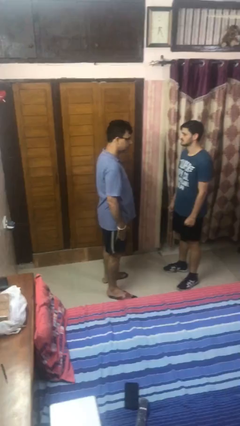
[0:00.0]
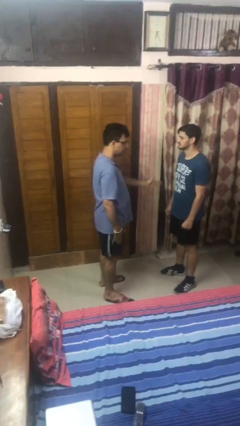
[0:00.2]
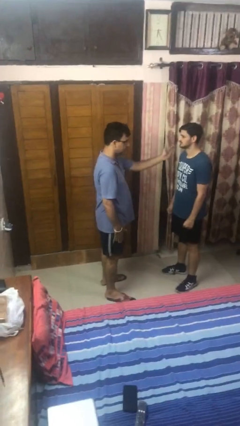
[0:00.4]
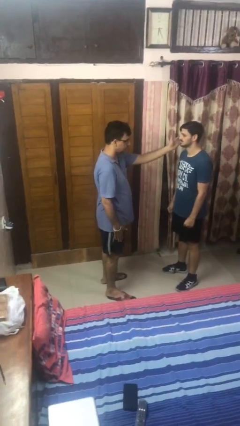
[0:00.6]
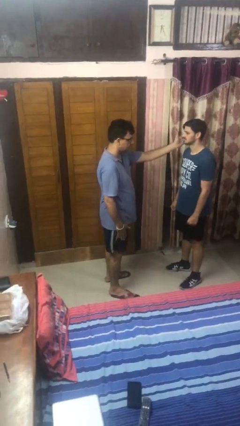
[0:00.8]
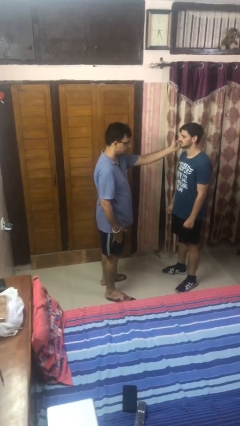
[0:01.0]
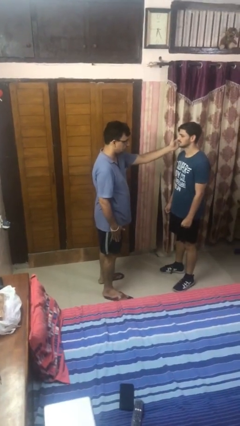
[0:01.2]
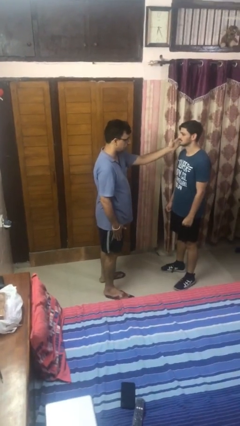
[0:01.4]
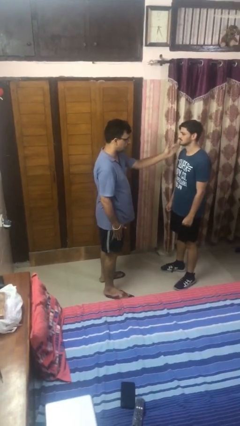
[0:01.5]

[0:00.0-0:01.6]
person touches face of person

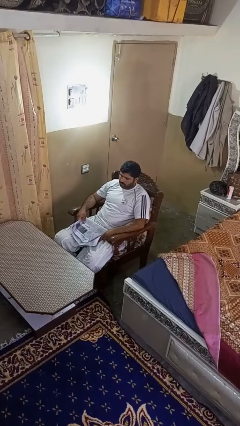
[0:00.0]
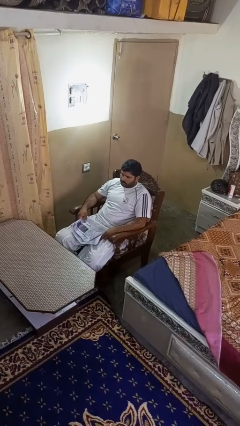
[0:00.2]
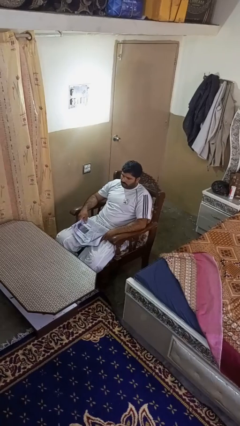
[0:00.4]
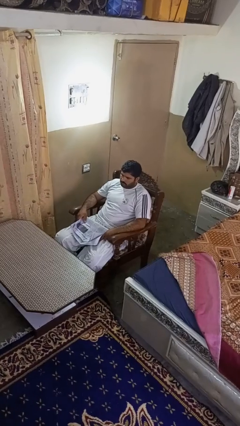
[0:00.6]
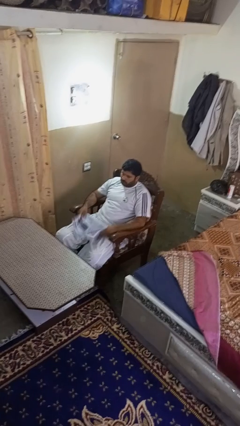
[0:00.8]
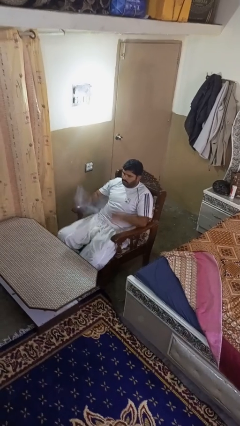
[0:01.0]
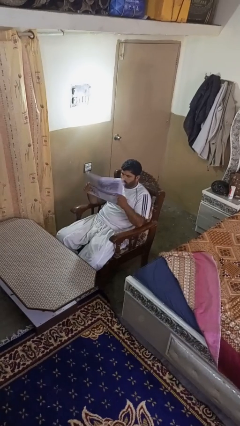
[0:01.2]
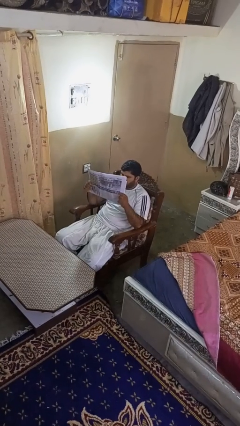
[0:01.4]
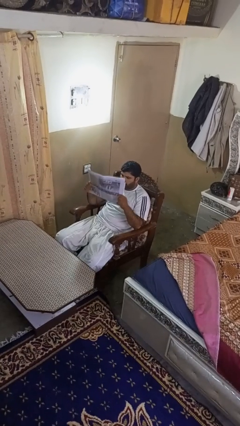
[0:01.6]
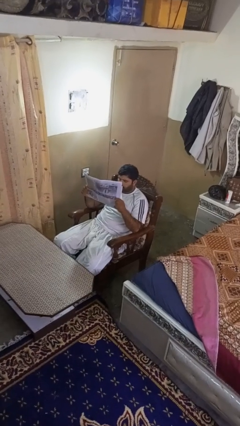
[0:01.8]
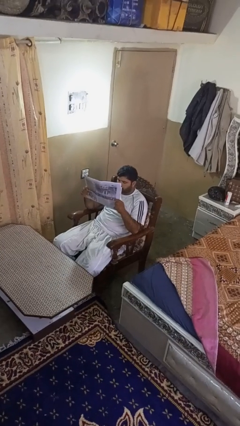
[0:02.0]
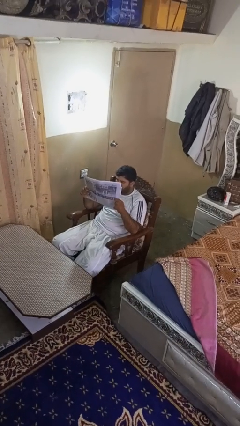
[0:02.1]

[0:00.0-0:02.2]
person reads newspaper

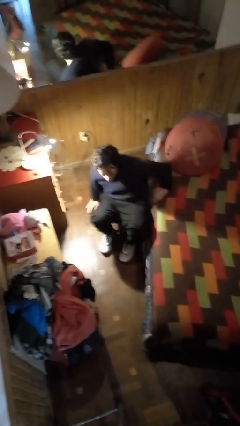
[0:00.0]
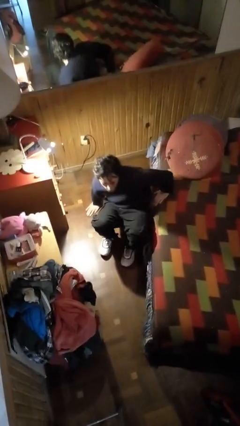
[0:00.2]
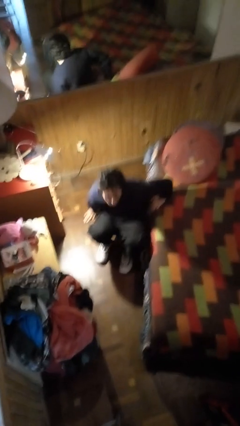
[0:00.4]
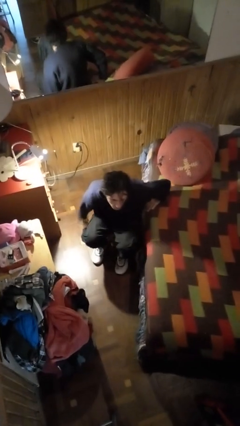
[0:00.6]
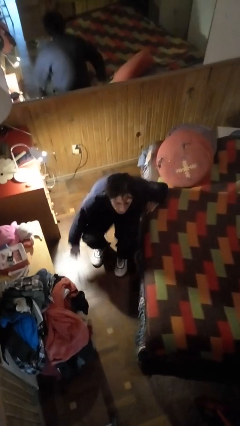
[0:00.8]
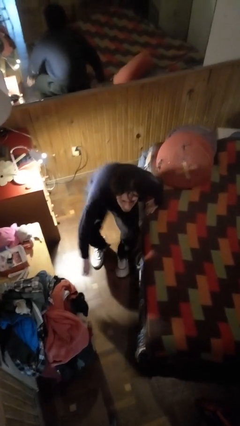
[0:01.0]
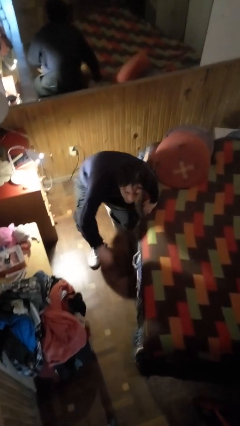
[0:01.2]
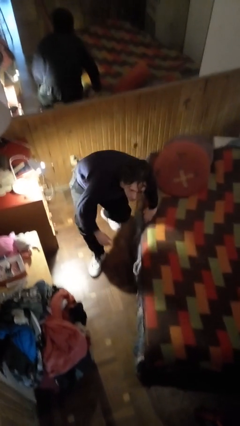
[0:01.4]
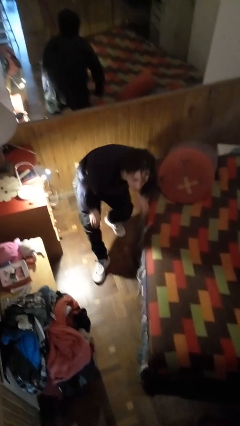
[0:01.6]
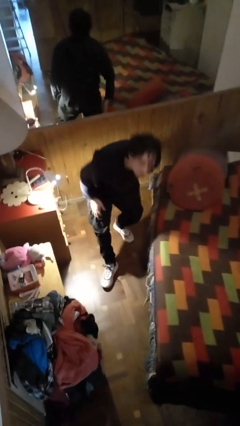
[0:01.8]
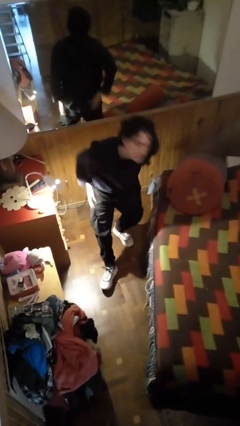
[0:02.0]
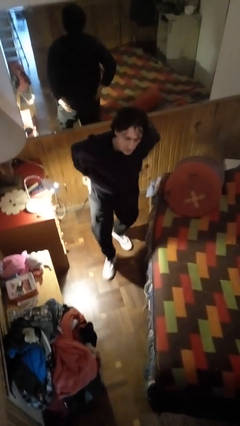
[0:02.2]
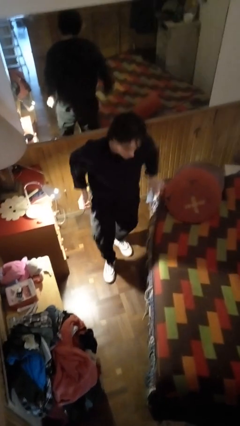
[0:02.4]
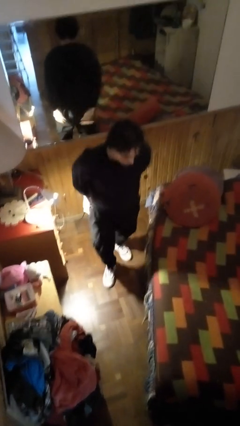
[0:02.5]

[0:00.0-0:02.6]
person stands up from floor

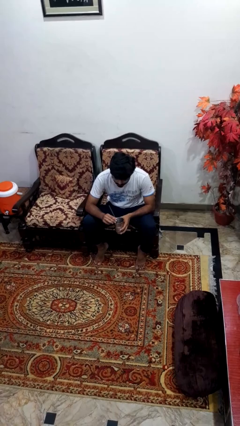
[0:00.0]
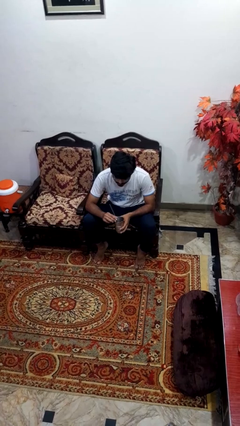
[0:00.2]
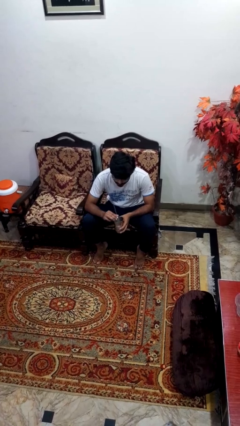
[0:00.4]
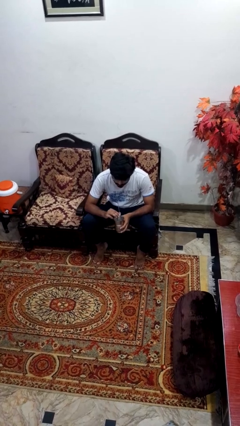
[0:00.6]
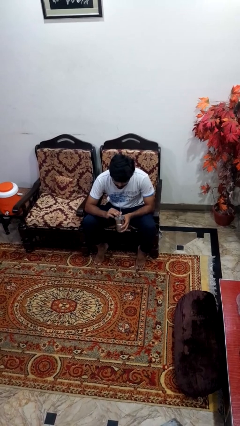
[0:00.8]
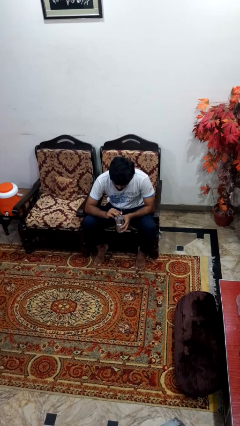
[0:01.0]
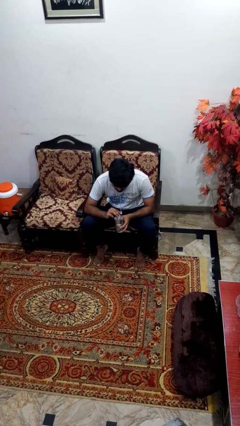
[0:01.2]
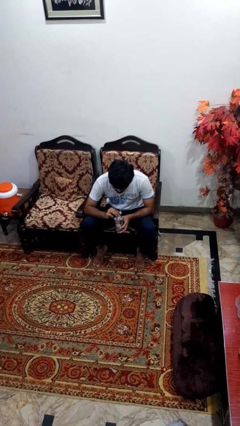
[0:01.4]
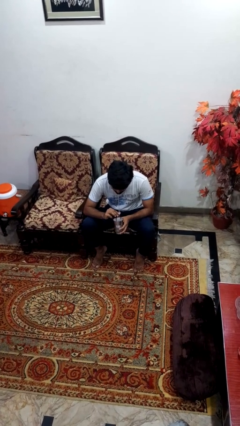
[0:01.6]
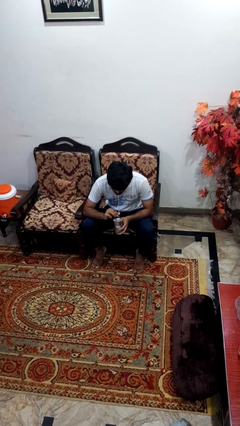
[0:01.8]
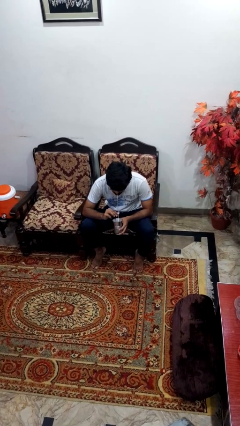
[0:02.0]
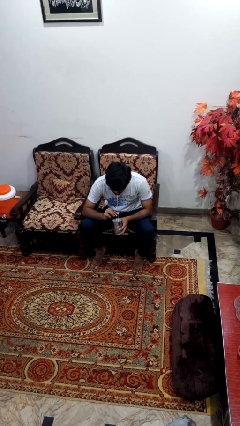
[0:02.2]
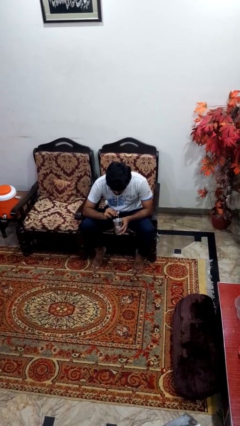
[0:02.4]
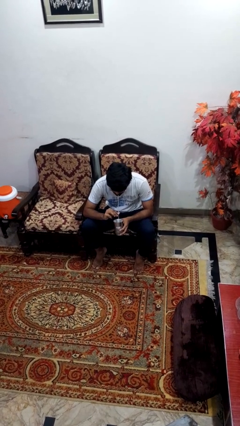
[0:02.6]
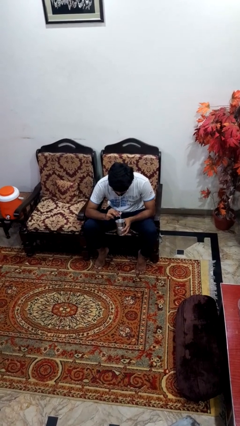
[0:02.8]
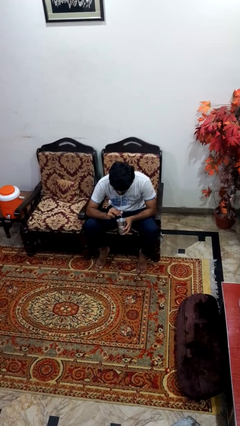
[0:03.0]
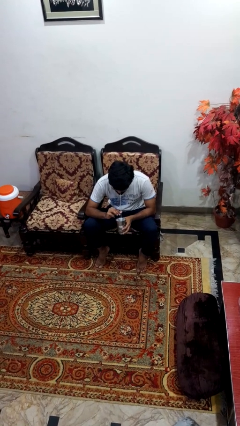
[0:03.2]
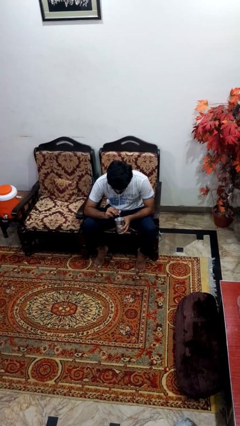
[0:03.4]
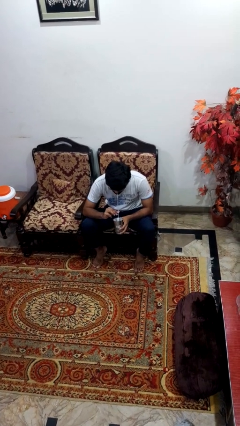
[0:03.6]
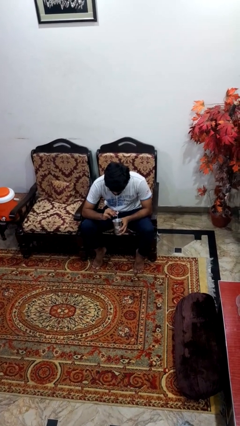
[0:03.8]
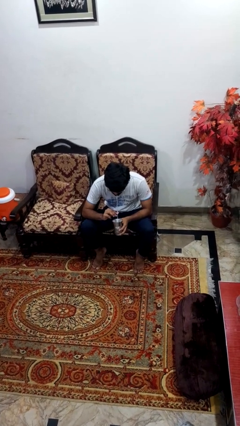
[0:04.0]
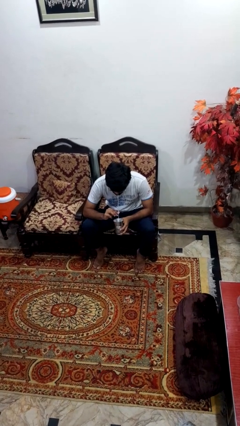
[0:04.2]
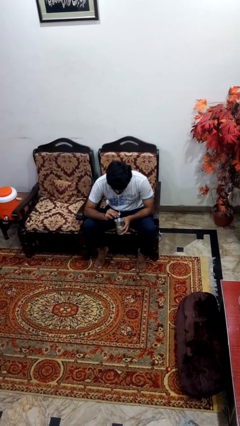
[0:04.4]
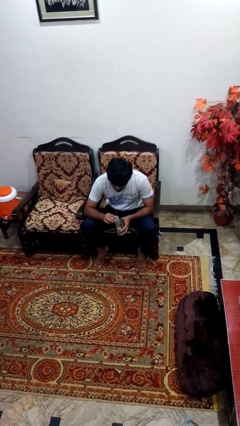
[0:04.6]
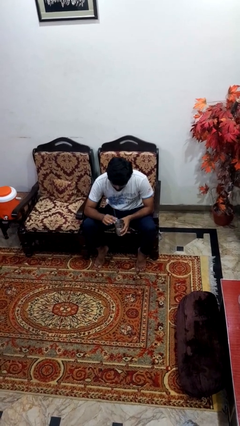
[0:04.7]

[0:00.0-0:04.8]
person drinks from straw

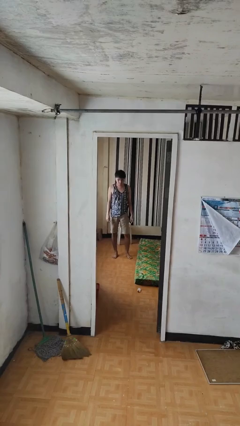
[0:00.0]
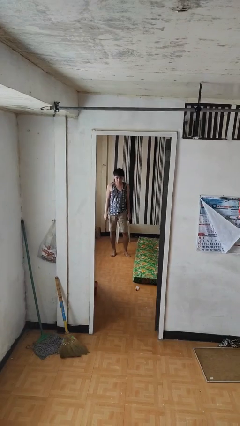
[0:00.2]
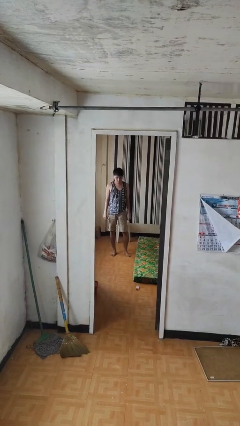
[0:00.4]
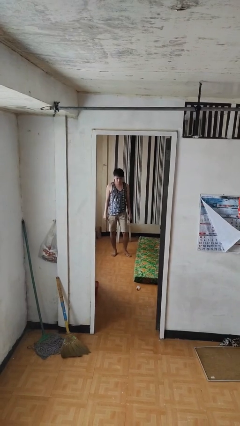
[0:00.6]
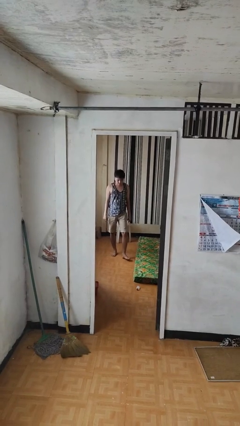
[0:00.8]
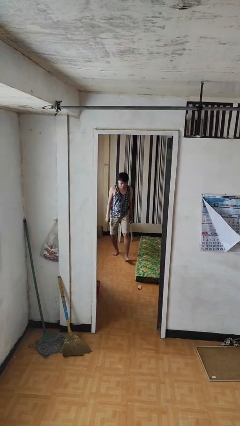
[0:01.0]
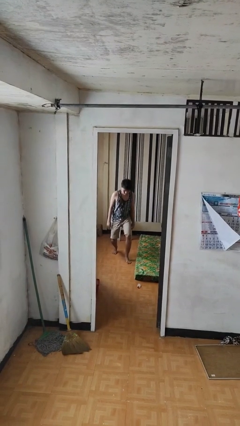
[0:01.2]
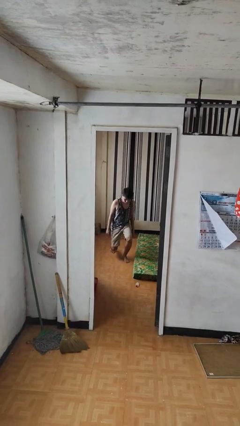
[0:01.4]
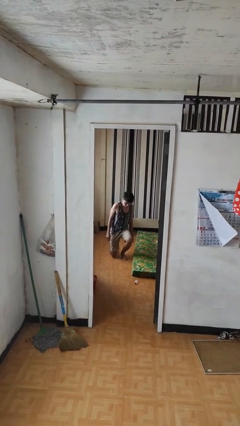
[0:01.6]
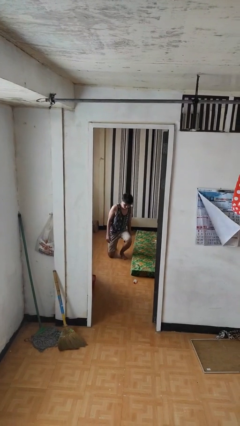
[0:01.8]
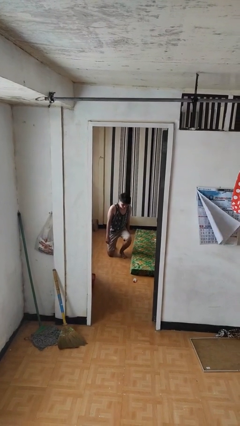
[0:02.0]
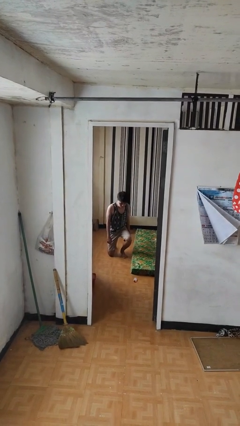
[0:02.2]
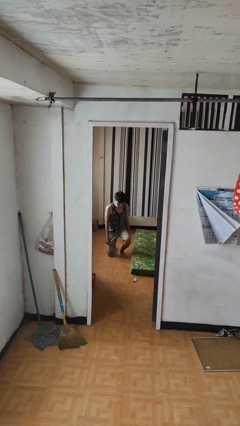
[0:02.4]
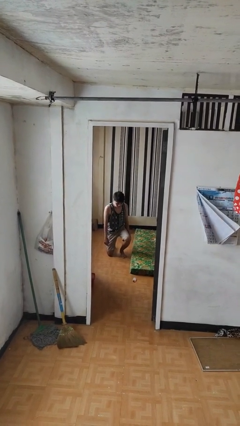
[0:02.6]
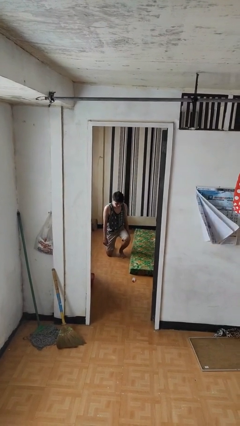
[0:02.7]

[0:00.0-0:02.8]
person kneels

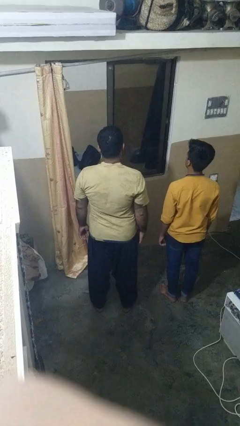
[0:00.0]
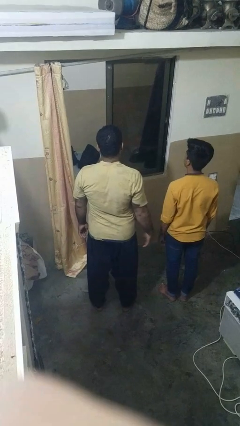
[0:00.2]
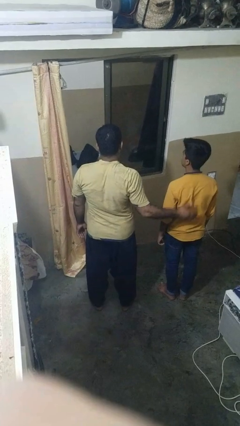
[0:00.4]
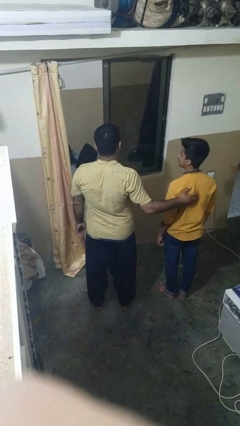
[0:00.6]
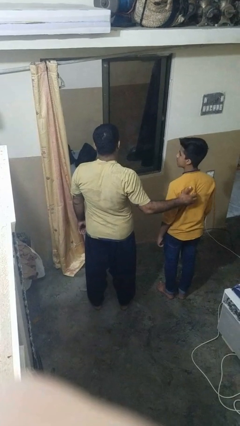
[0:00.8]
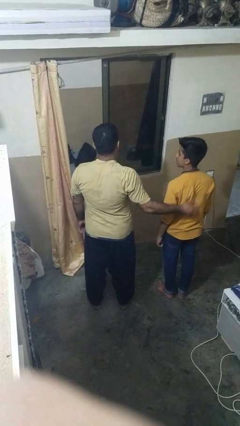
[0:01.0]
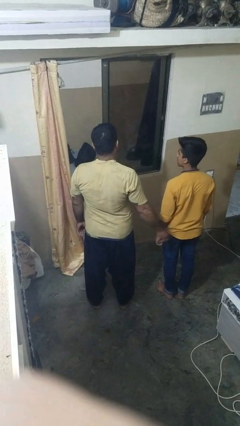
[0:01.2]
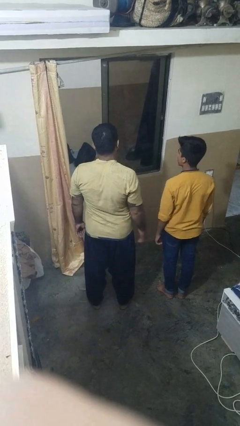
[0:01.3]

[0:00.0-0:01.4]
person touches back of person

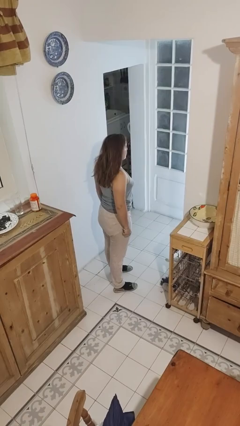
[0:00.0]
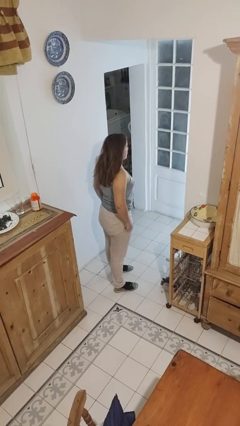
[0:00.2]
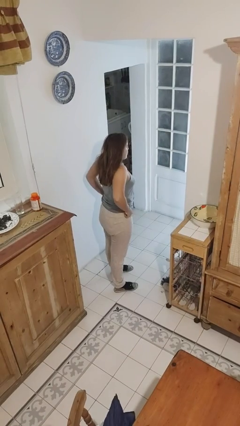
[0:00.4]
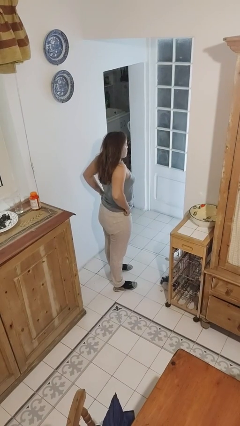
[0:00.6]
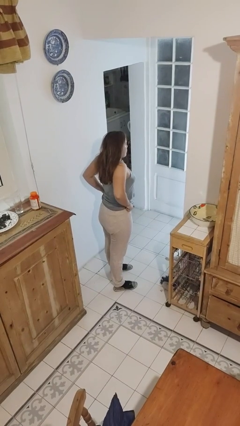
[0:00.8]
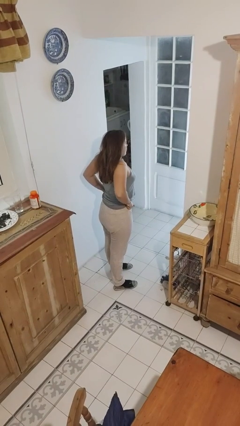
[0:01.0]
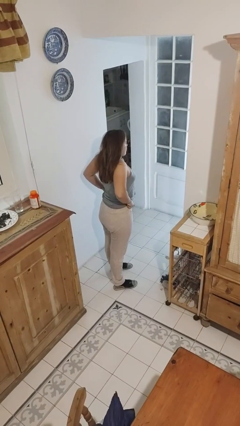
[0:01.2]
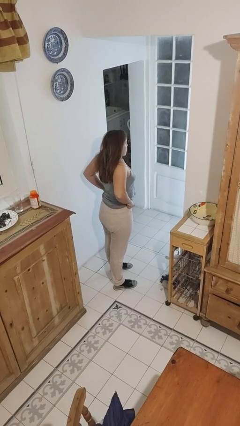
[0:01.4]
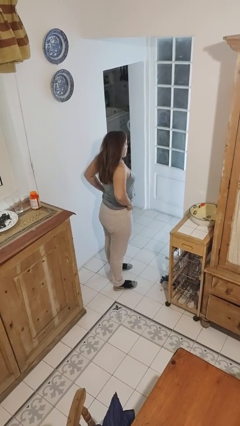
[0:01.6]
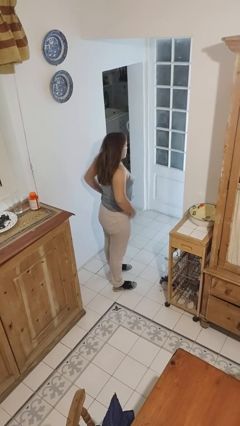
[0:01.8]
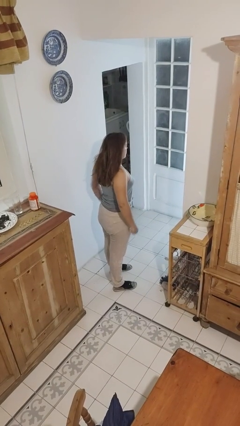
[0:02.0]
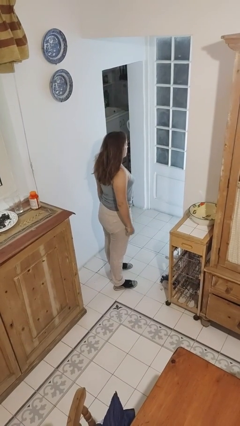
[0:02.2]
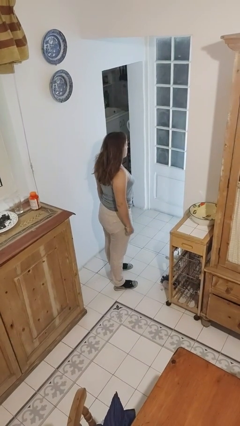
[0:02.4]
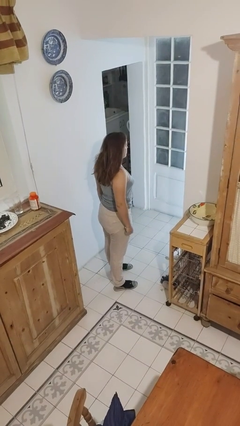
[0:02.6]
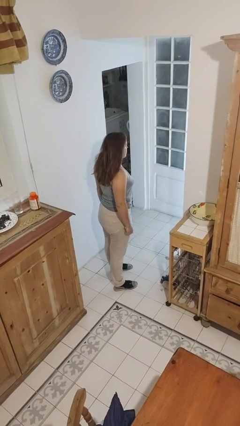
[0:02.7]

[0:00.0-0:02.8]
person hikes up pants
